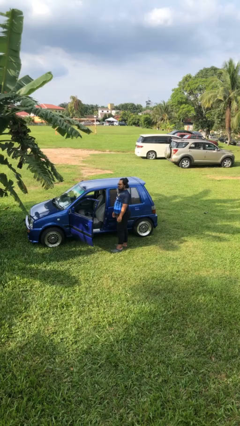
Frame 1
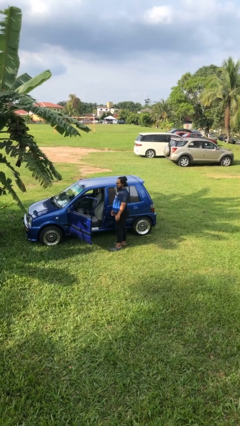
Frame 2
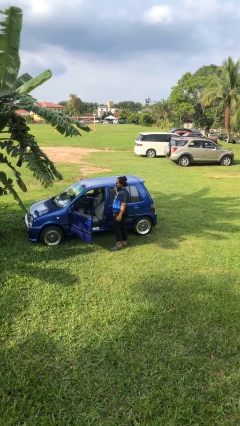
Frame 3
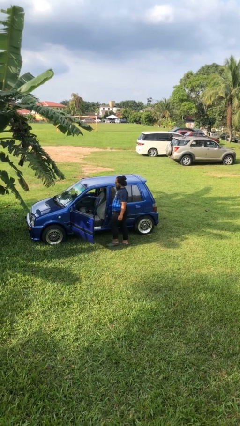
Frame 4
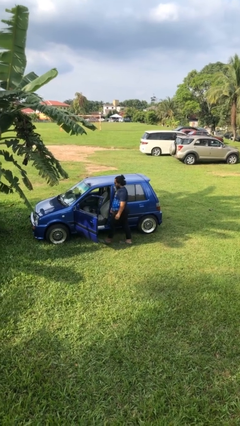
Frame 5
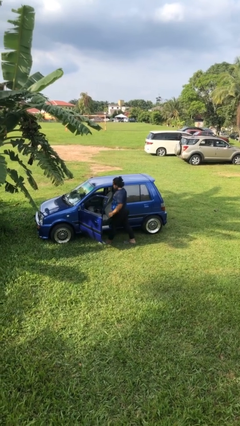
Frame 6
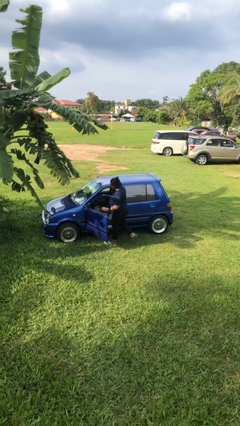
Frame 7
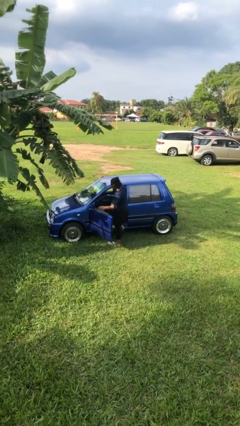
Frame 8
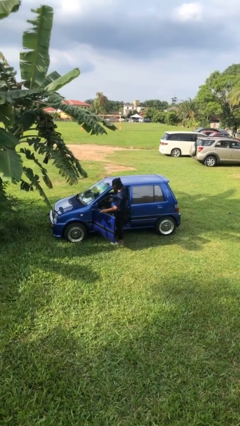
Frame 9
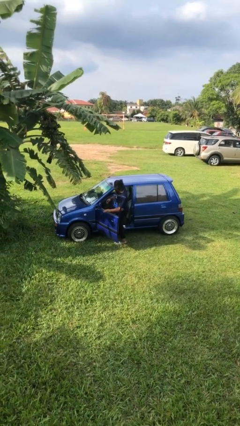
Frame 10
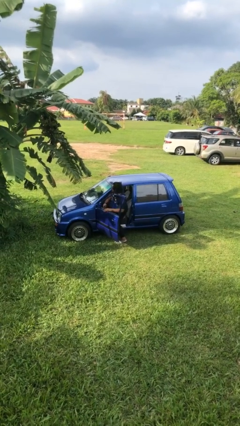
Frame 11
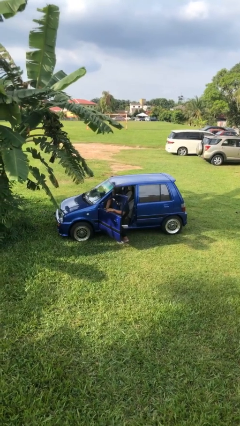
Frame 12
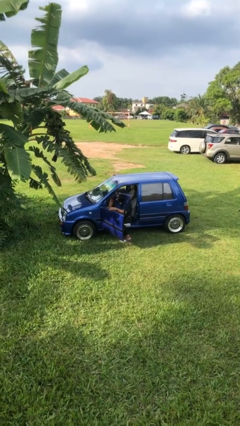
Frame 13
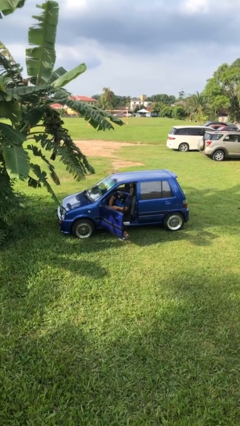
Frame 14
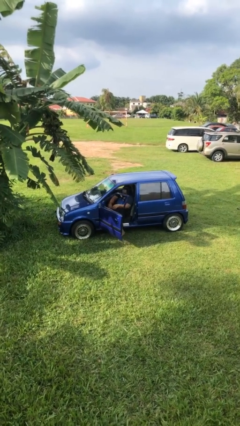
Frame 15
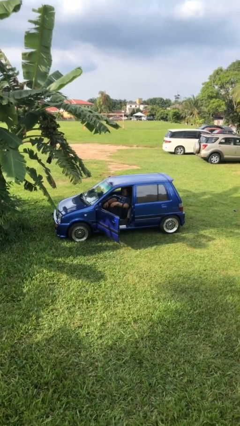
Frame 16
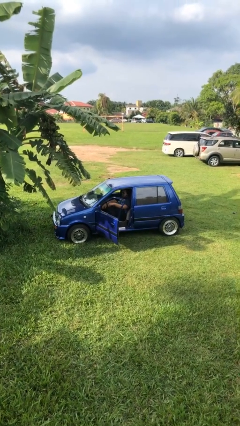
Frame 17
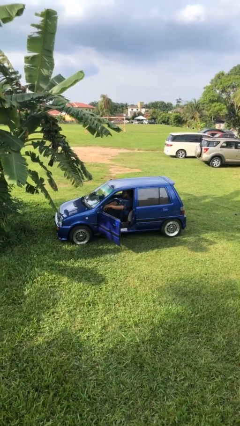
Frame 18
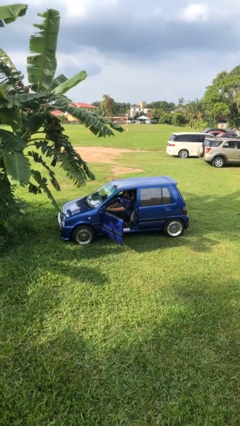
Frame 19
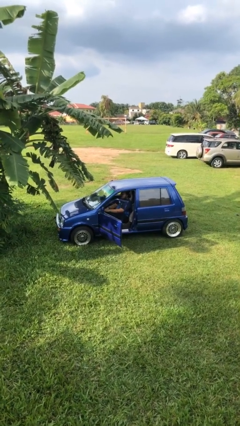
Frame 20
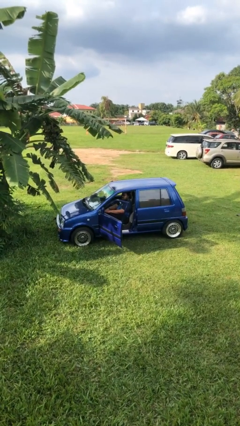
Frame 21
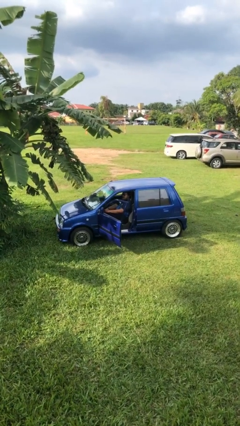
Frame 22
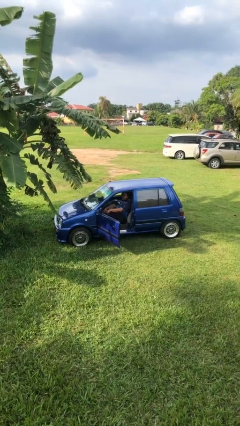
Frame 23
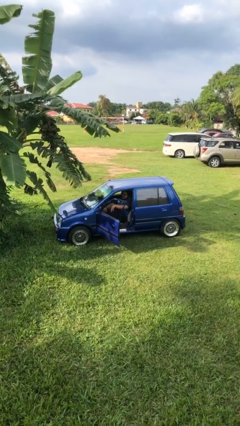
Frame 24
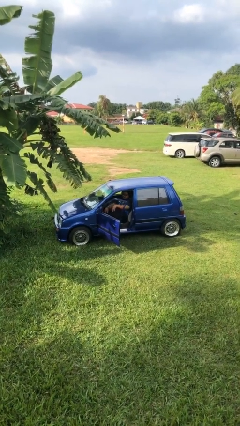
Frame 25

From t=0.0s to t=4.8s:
person enters car

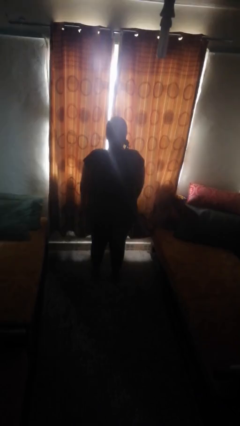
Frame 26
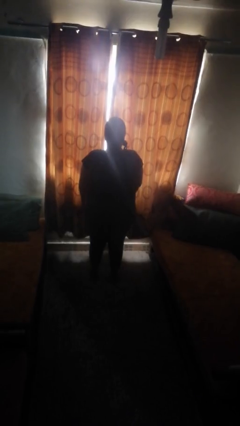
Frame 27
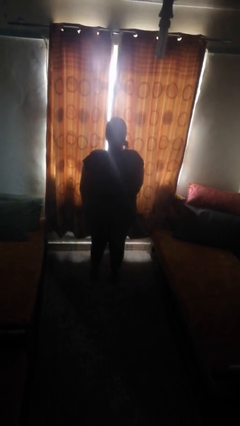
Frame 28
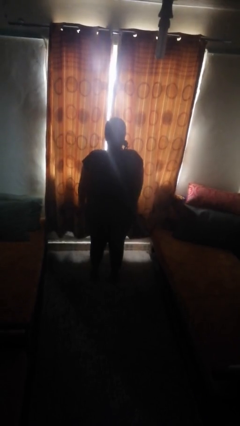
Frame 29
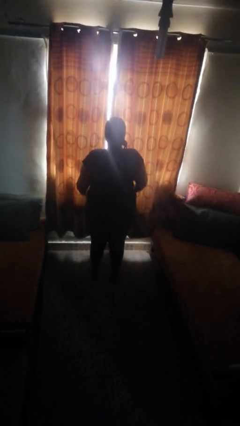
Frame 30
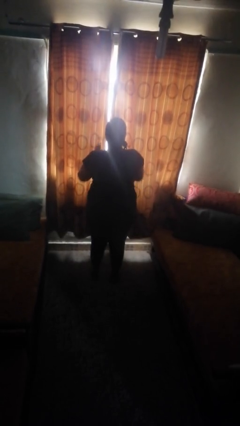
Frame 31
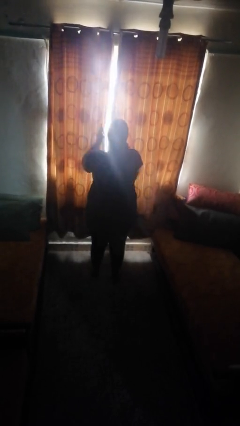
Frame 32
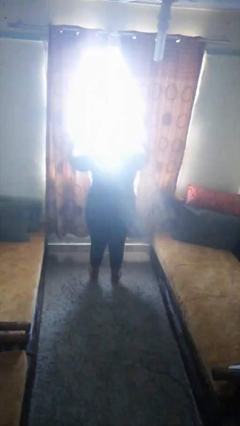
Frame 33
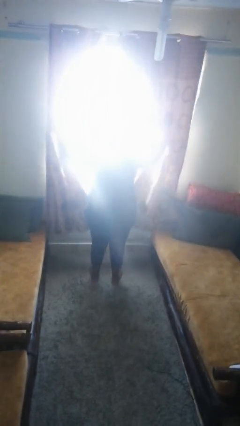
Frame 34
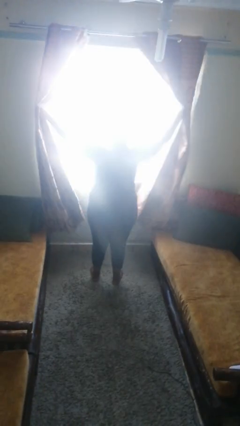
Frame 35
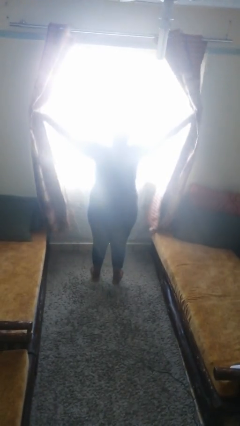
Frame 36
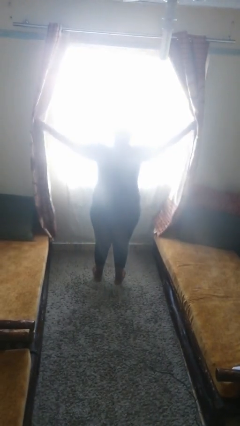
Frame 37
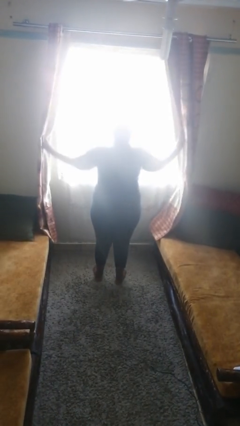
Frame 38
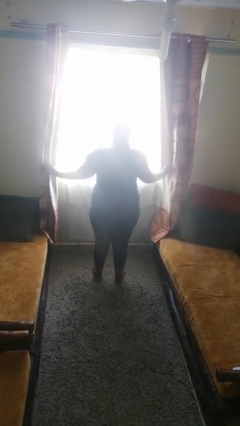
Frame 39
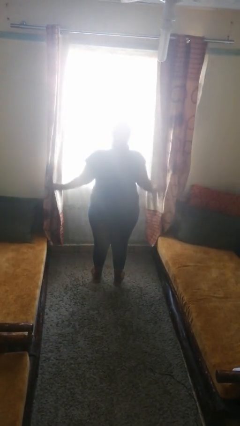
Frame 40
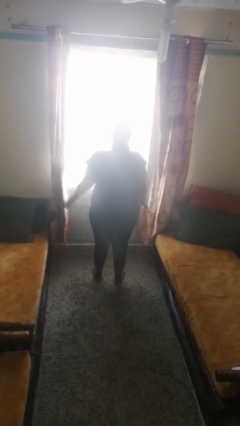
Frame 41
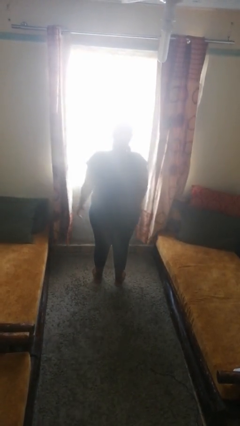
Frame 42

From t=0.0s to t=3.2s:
person opens curtains

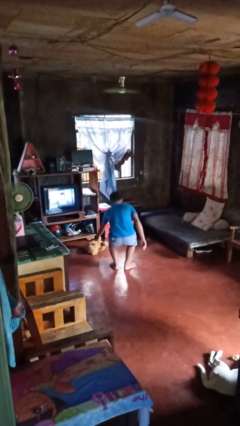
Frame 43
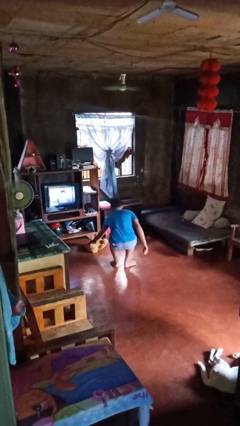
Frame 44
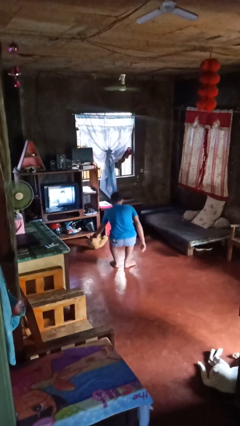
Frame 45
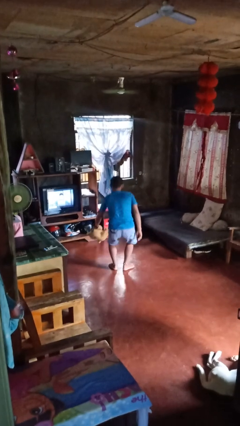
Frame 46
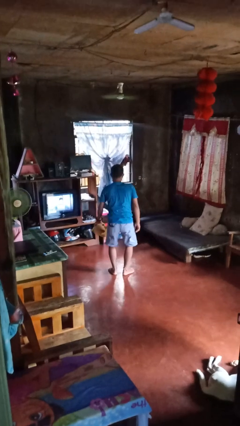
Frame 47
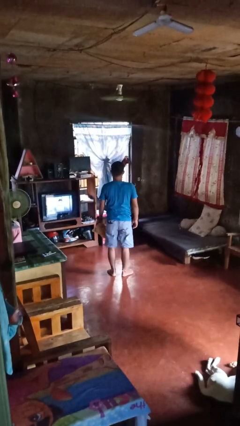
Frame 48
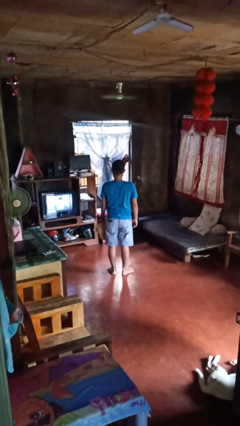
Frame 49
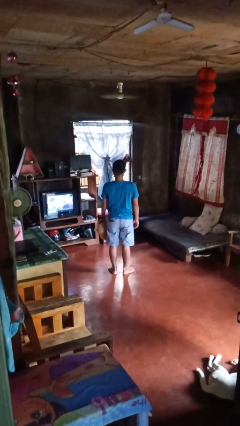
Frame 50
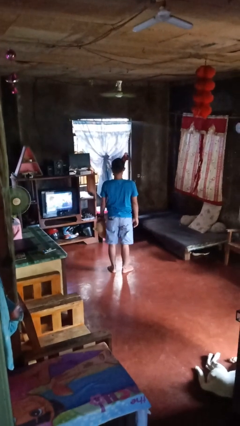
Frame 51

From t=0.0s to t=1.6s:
person picks up object from floor

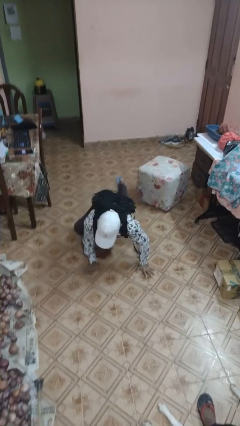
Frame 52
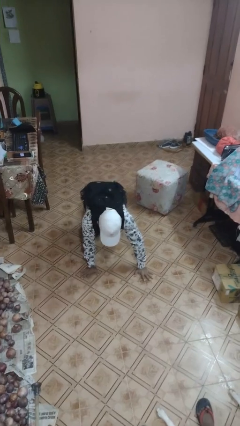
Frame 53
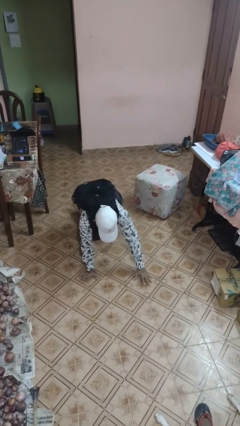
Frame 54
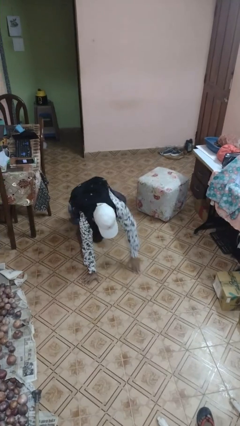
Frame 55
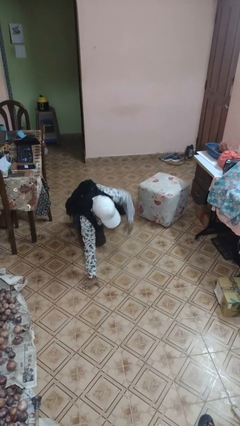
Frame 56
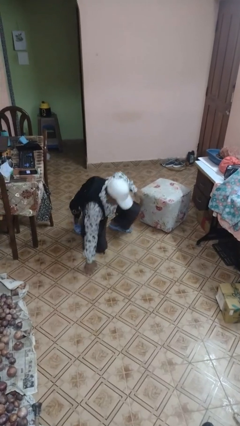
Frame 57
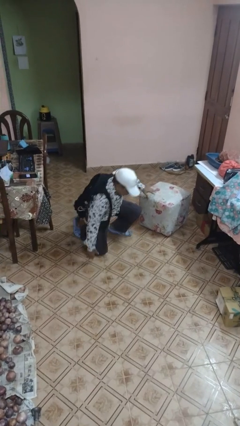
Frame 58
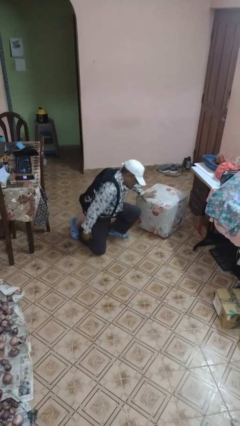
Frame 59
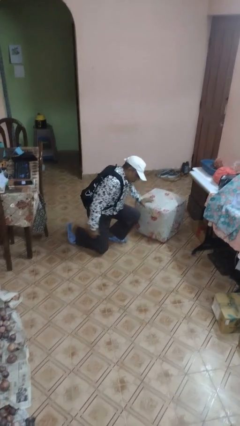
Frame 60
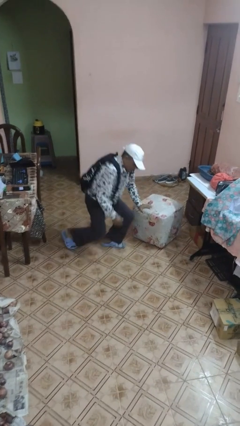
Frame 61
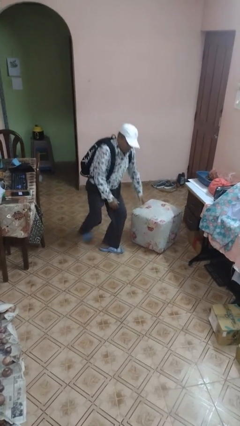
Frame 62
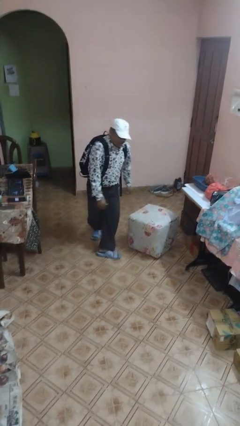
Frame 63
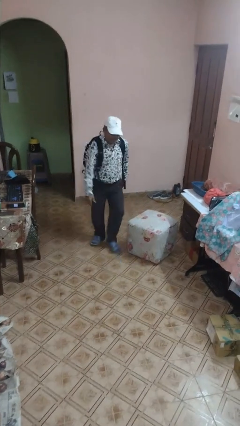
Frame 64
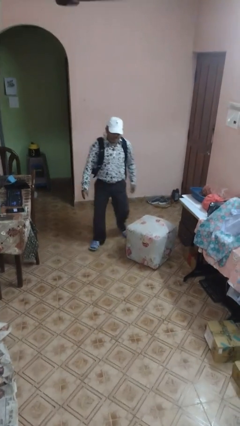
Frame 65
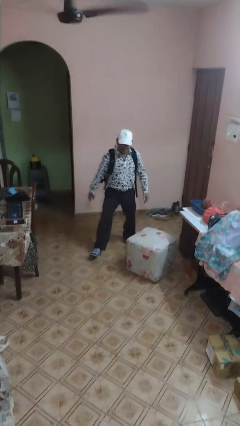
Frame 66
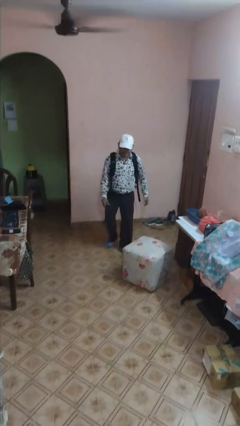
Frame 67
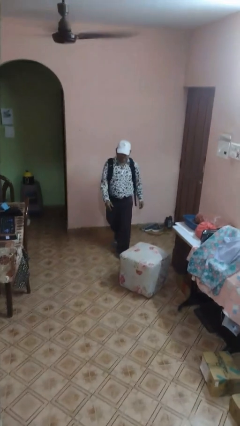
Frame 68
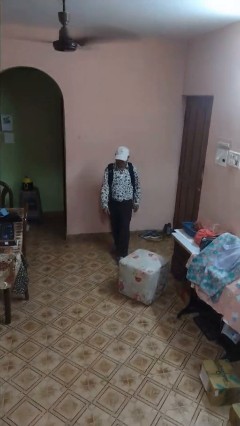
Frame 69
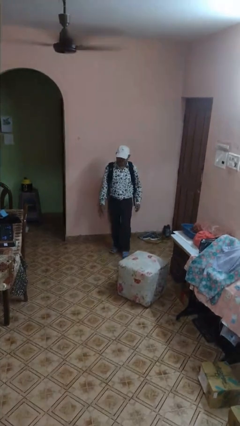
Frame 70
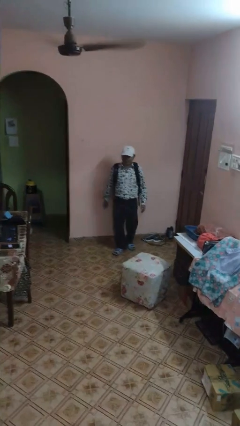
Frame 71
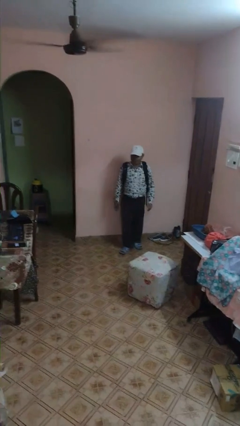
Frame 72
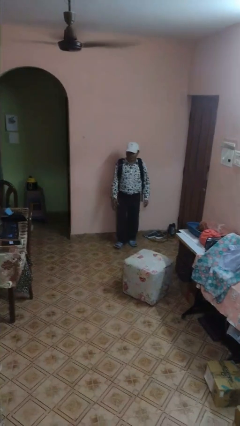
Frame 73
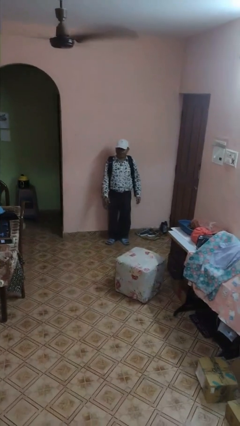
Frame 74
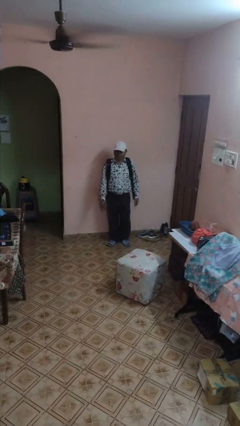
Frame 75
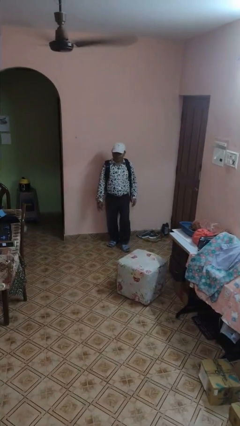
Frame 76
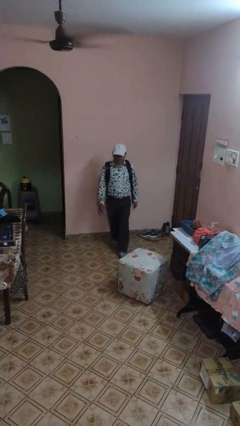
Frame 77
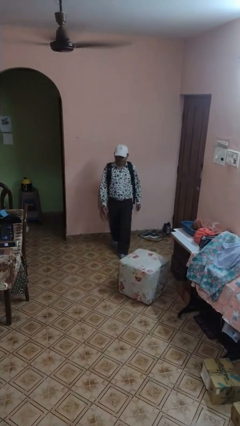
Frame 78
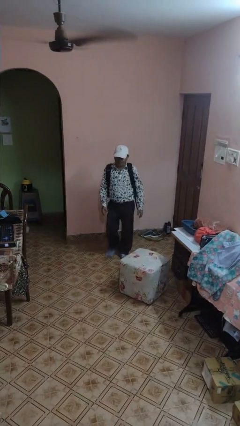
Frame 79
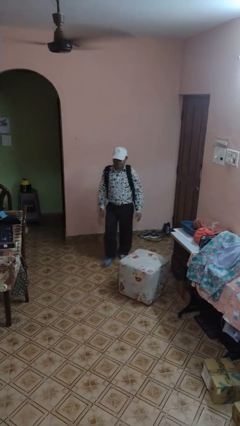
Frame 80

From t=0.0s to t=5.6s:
person stands up from floor

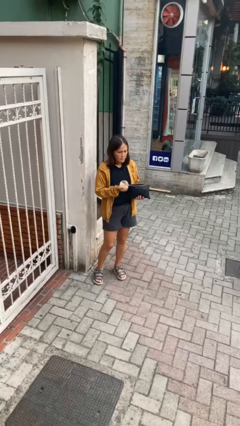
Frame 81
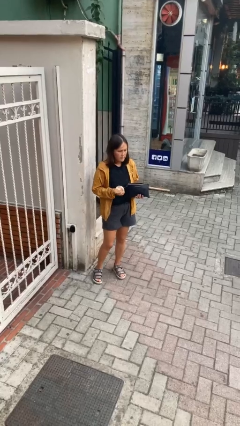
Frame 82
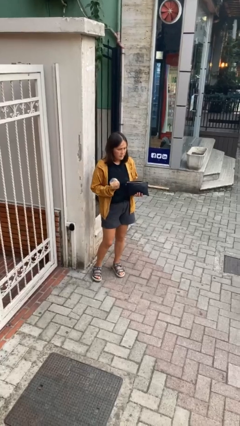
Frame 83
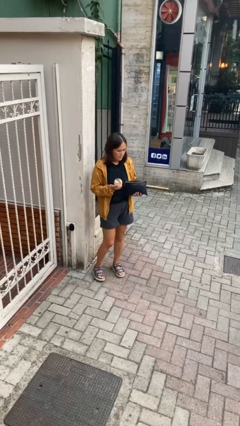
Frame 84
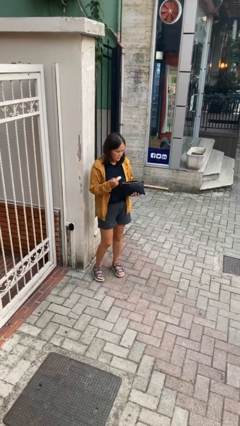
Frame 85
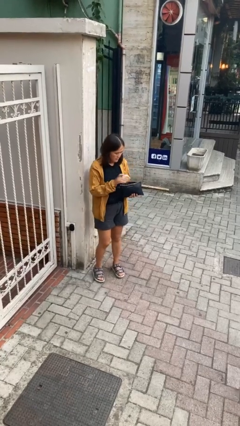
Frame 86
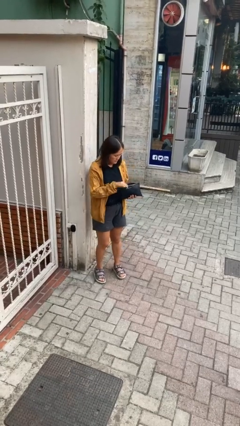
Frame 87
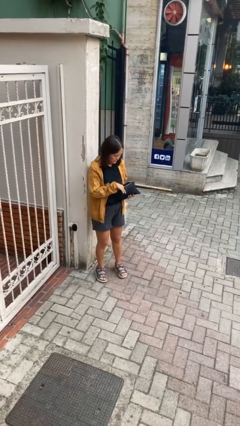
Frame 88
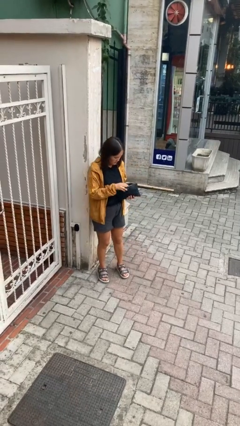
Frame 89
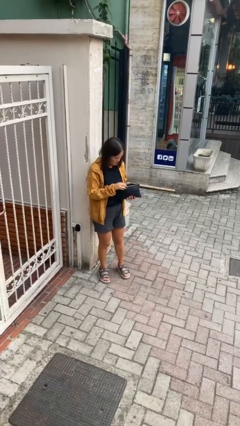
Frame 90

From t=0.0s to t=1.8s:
person puts object into purse

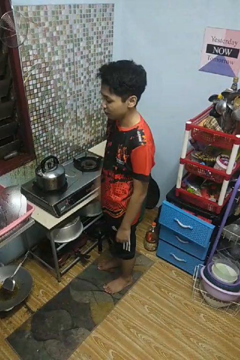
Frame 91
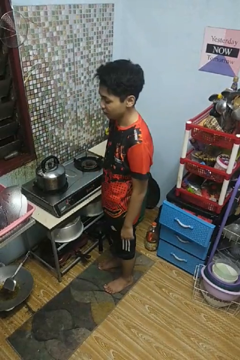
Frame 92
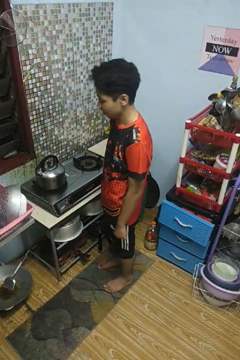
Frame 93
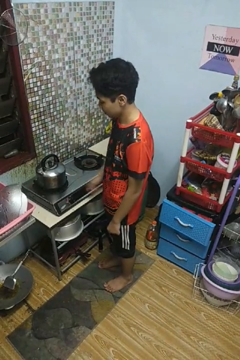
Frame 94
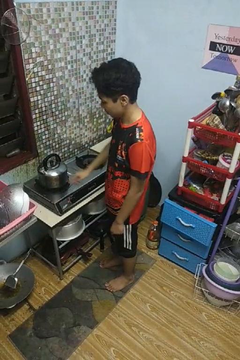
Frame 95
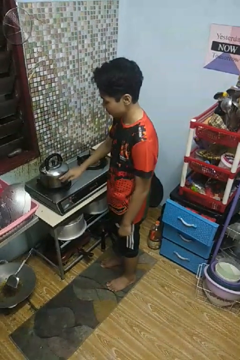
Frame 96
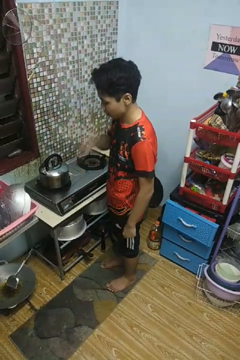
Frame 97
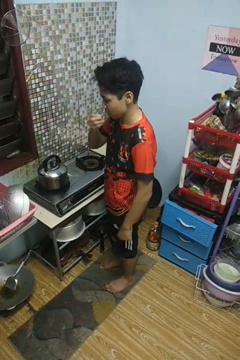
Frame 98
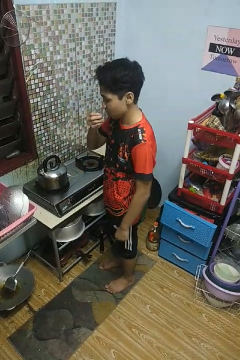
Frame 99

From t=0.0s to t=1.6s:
person burns hand
